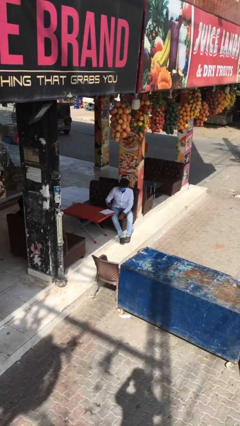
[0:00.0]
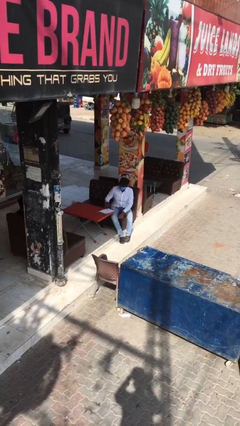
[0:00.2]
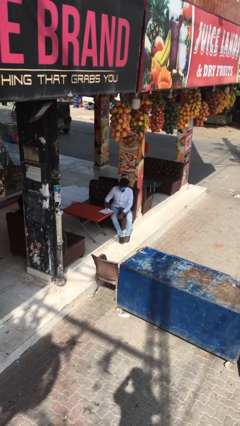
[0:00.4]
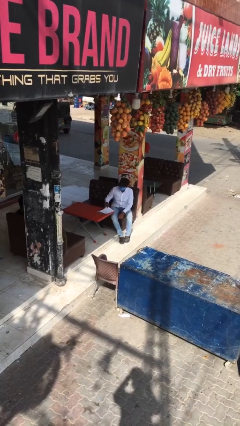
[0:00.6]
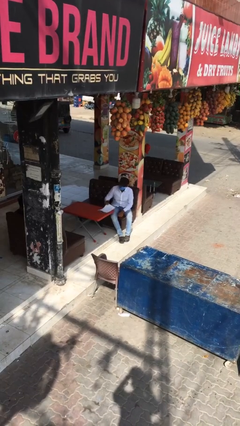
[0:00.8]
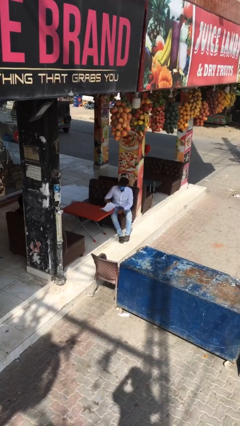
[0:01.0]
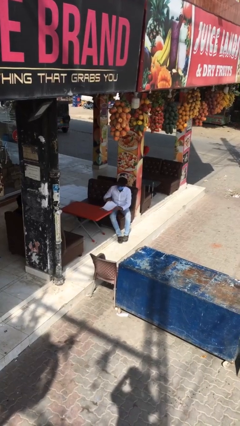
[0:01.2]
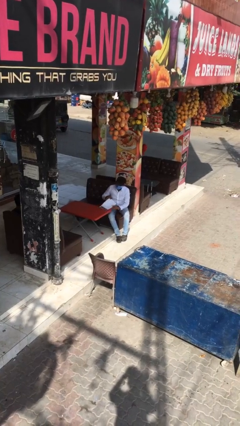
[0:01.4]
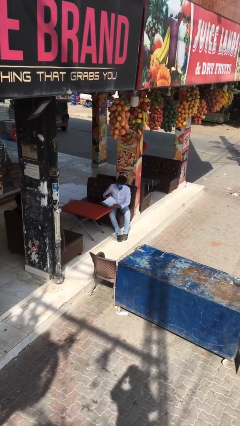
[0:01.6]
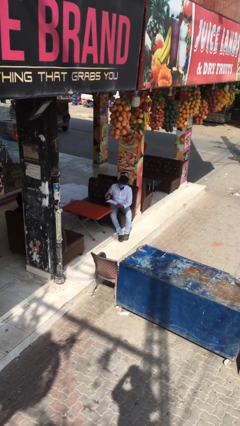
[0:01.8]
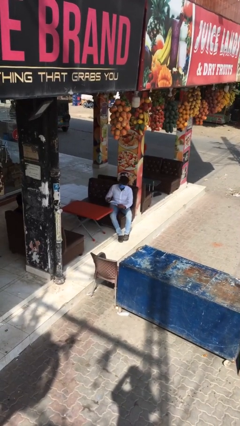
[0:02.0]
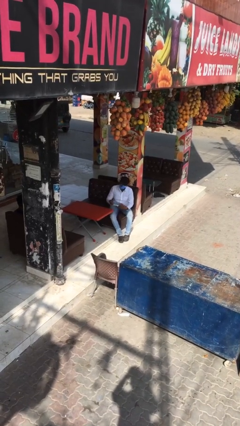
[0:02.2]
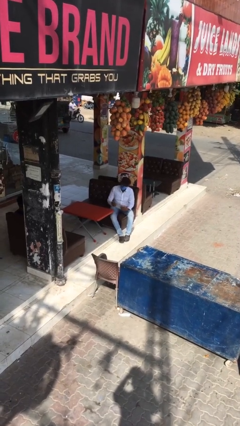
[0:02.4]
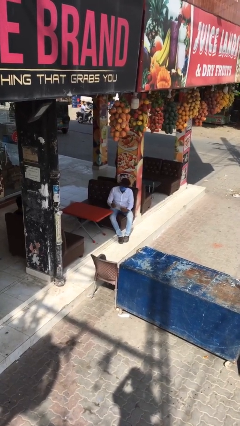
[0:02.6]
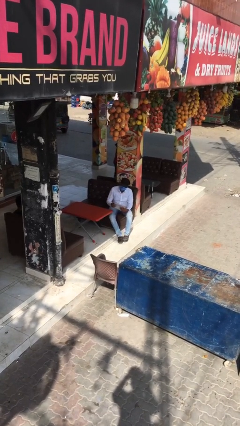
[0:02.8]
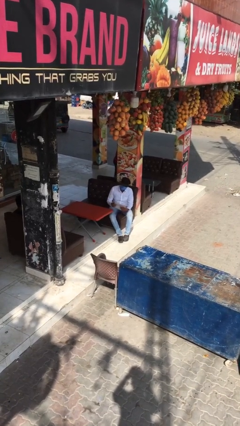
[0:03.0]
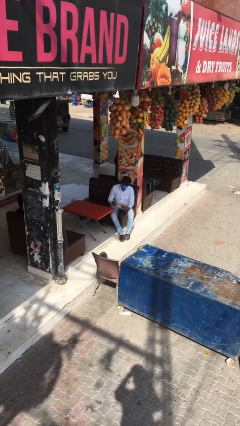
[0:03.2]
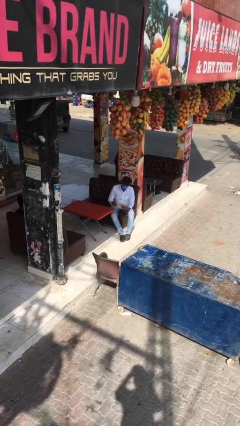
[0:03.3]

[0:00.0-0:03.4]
person picks up object from table

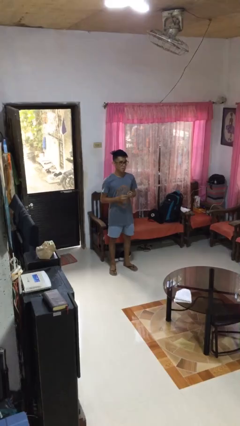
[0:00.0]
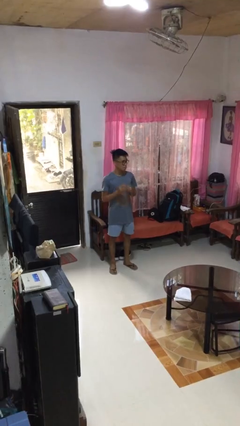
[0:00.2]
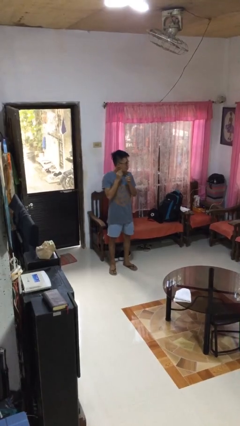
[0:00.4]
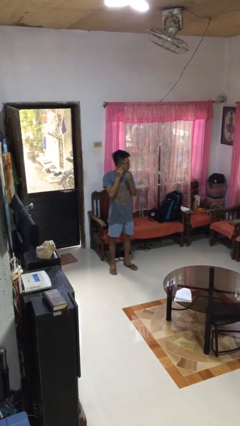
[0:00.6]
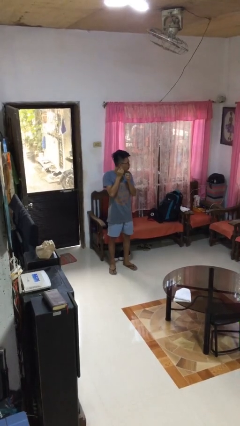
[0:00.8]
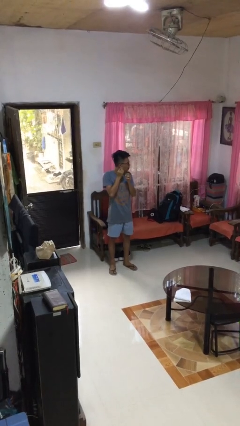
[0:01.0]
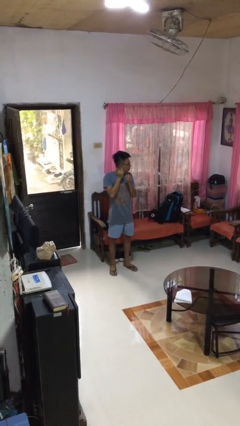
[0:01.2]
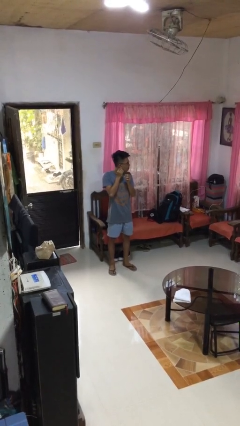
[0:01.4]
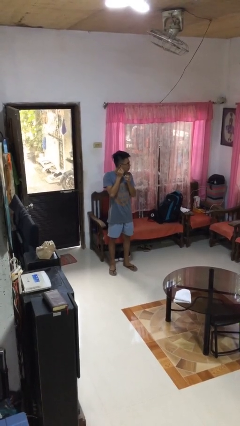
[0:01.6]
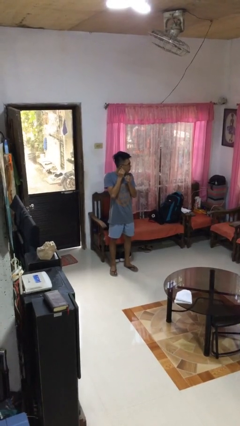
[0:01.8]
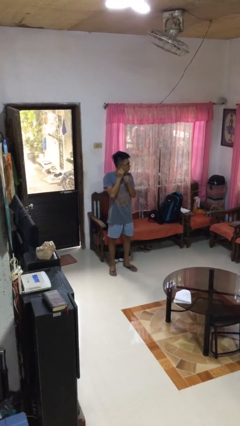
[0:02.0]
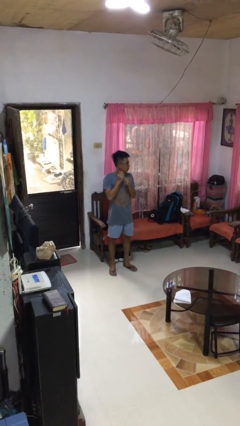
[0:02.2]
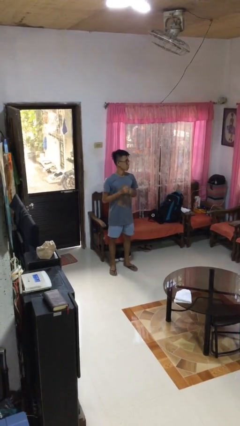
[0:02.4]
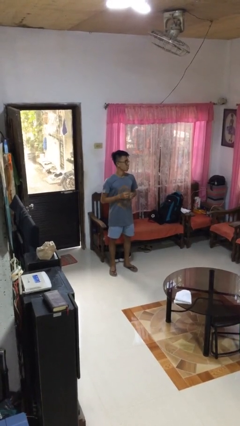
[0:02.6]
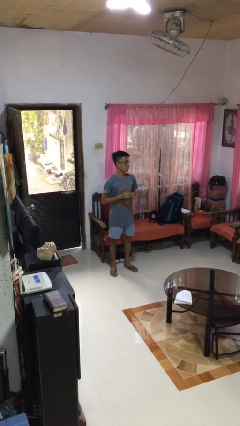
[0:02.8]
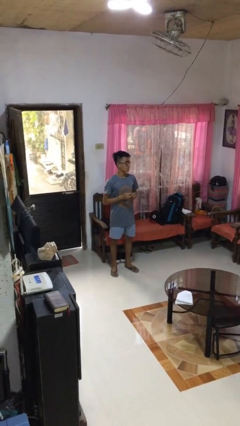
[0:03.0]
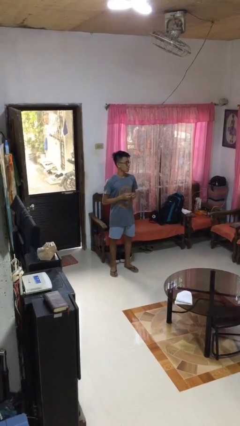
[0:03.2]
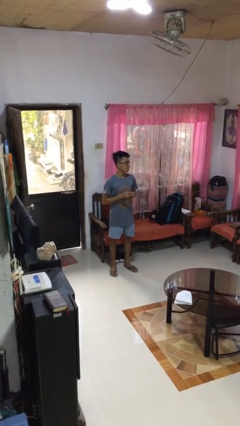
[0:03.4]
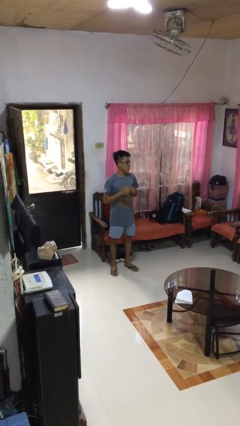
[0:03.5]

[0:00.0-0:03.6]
person puts on earrings

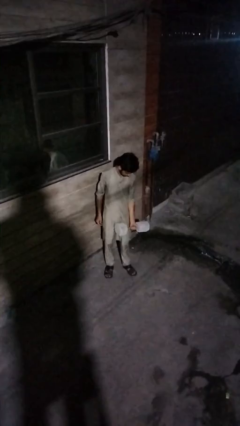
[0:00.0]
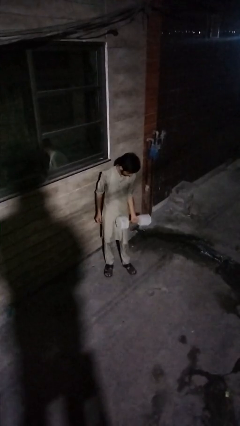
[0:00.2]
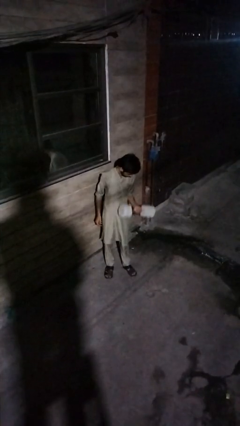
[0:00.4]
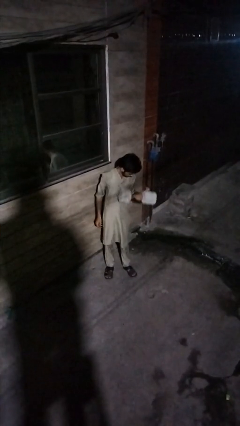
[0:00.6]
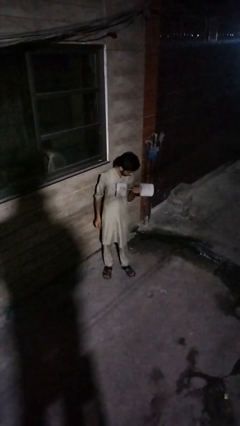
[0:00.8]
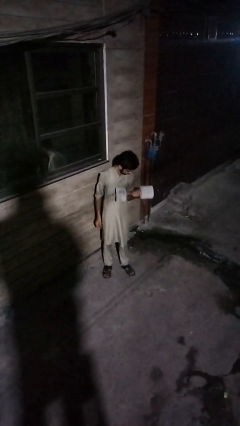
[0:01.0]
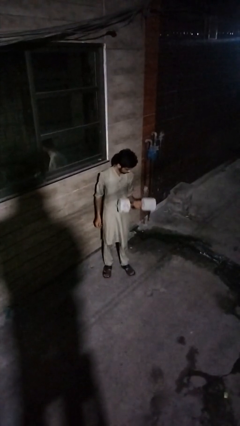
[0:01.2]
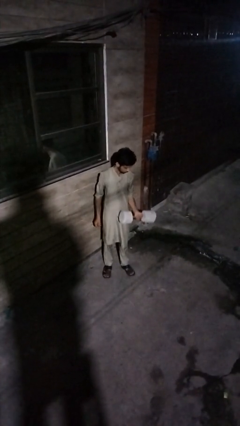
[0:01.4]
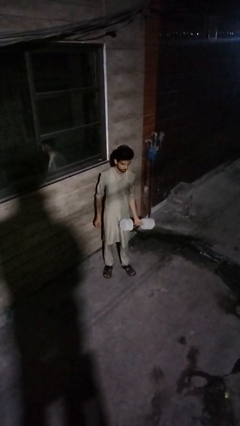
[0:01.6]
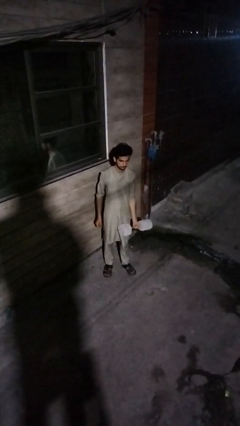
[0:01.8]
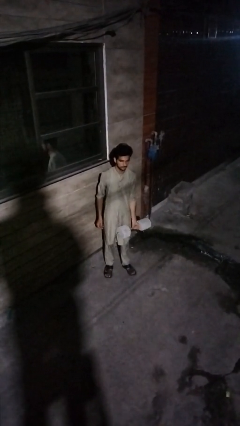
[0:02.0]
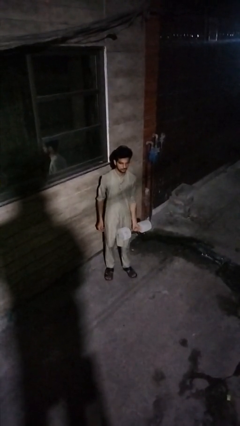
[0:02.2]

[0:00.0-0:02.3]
person lifts dumbbells

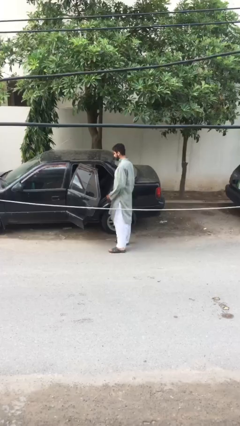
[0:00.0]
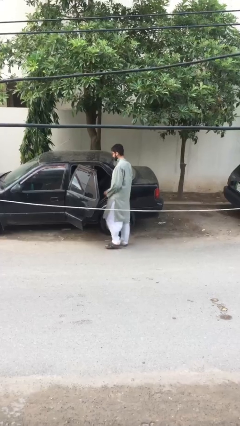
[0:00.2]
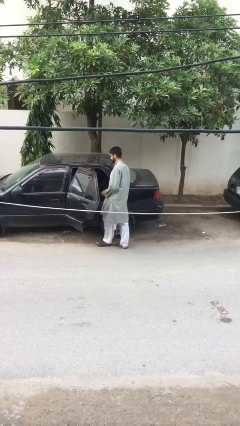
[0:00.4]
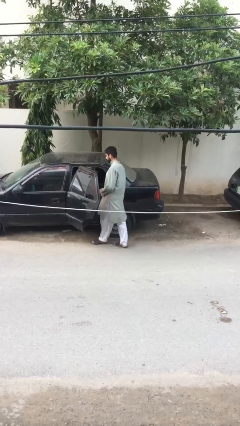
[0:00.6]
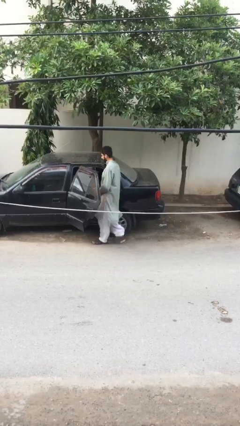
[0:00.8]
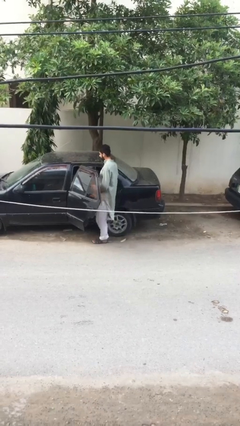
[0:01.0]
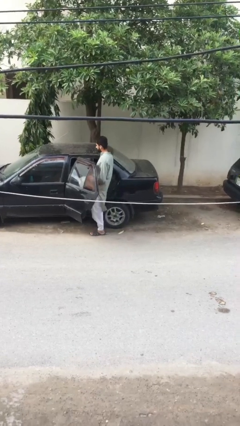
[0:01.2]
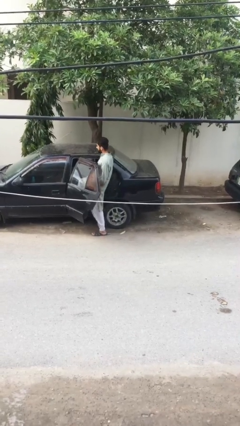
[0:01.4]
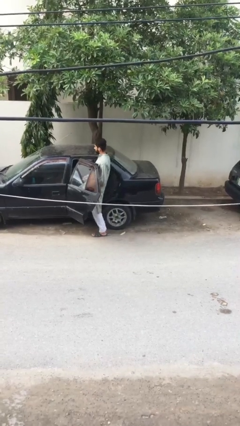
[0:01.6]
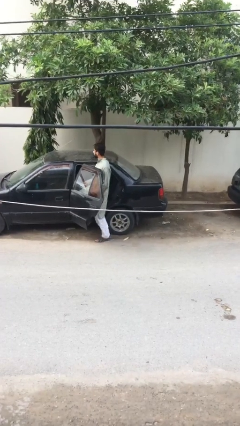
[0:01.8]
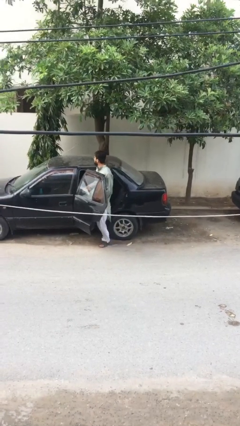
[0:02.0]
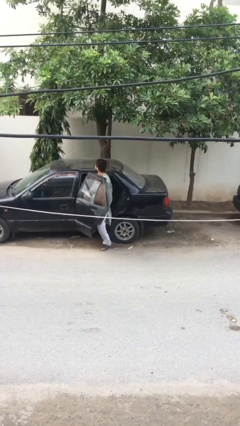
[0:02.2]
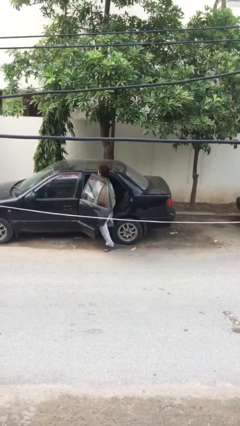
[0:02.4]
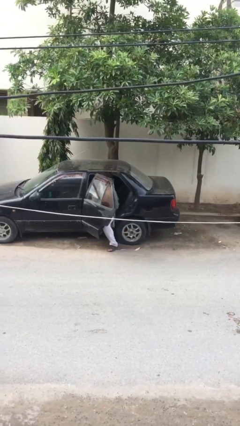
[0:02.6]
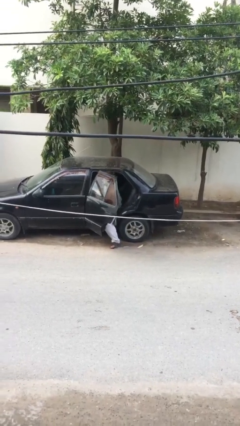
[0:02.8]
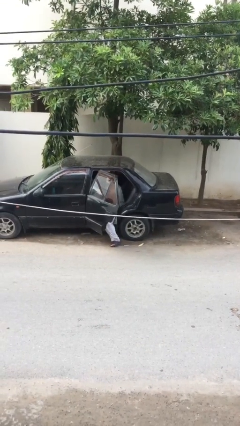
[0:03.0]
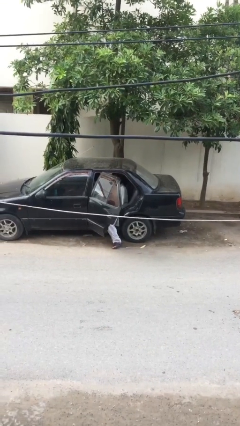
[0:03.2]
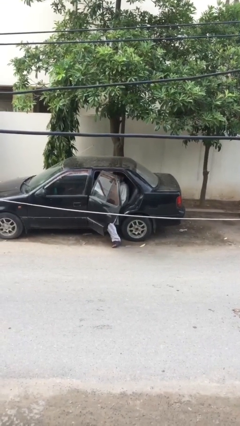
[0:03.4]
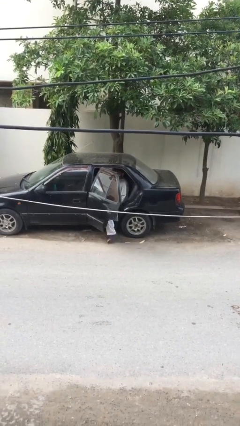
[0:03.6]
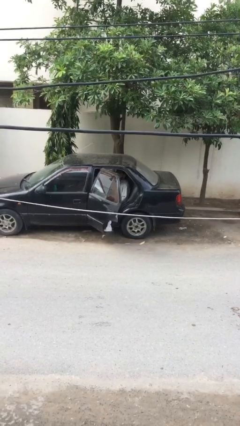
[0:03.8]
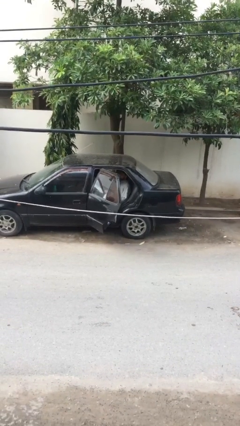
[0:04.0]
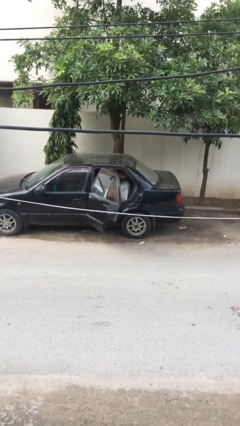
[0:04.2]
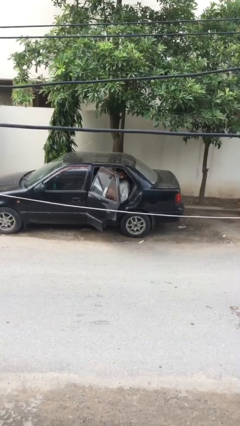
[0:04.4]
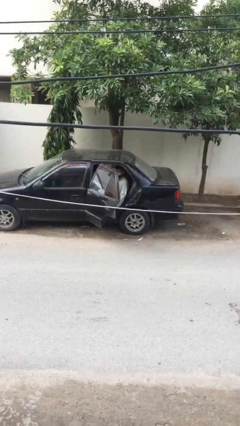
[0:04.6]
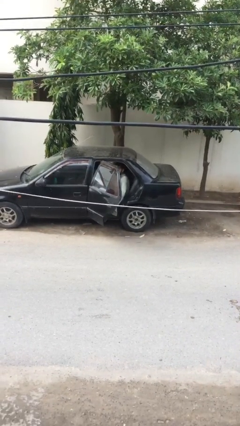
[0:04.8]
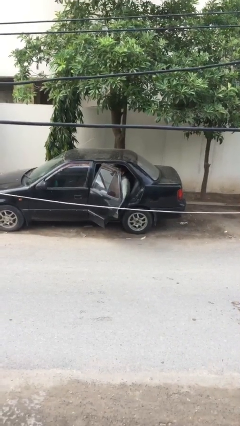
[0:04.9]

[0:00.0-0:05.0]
person enters car

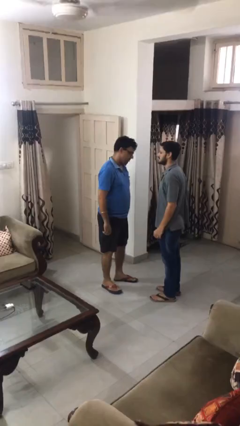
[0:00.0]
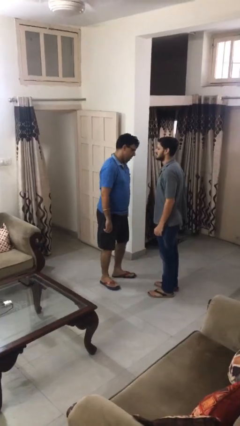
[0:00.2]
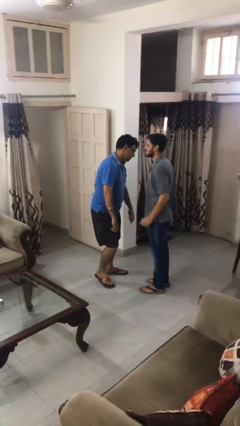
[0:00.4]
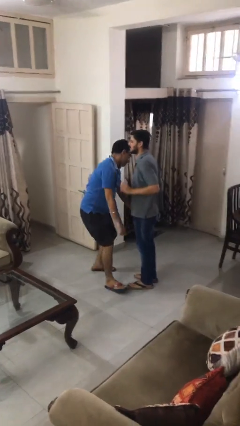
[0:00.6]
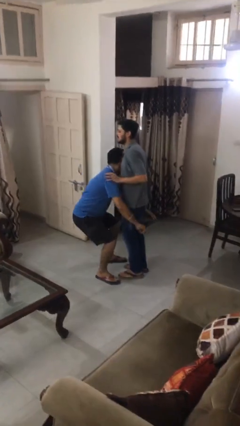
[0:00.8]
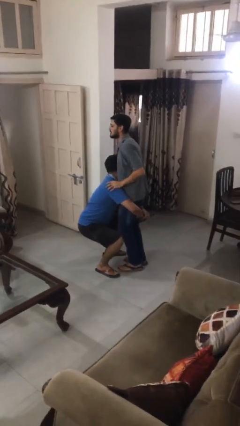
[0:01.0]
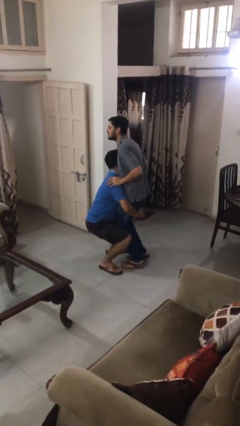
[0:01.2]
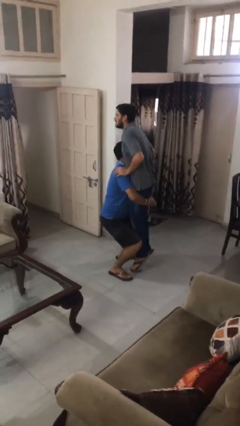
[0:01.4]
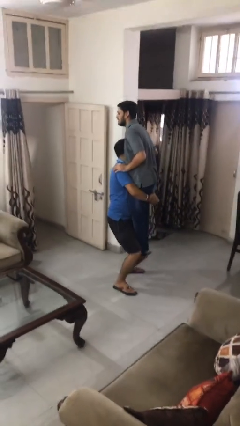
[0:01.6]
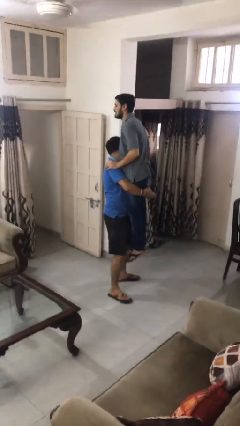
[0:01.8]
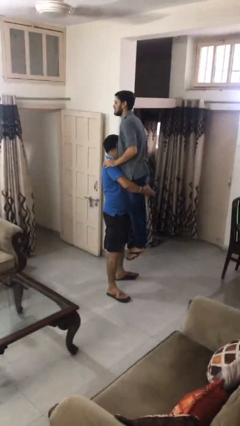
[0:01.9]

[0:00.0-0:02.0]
person picks up person

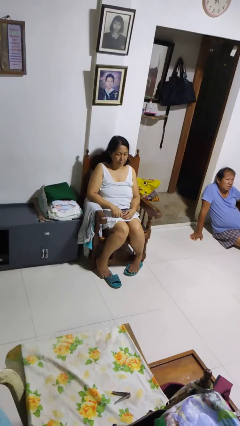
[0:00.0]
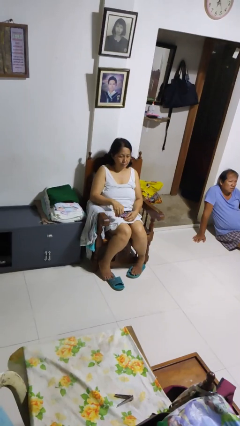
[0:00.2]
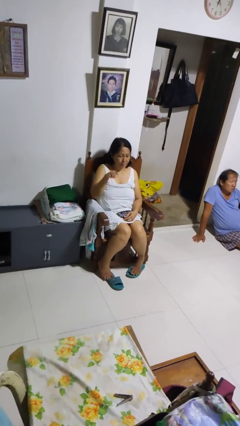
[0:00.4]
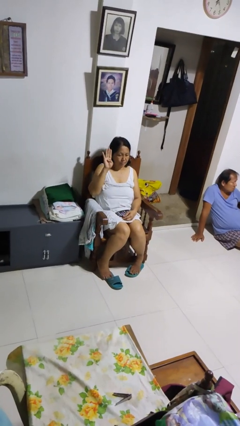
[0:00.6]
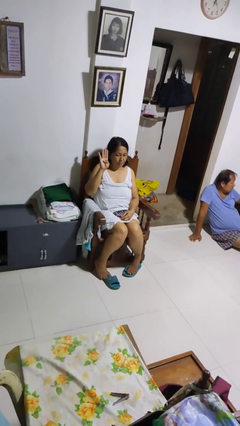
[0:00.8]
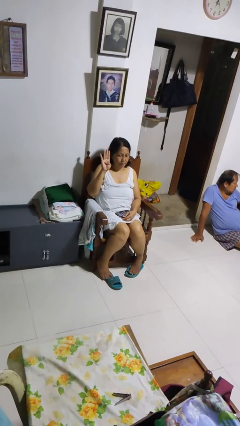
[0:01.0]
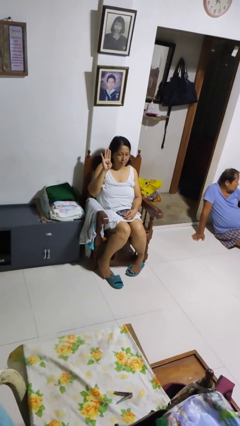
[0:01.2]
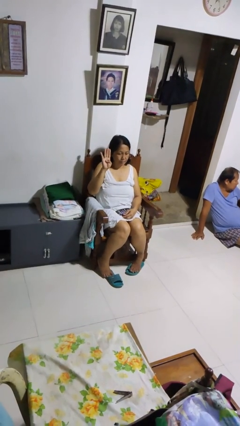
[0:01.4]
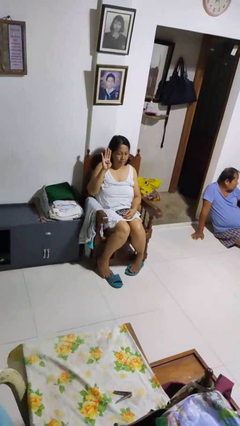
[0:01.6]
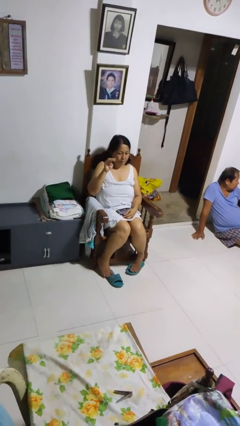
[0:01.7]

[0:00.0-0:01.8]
person gestures number four
